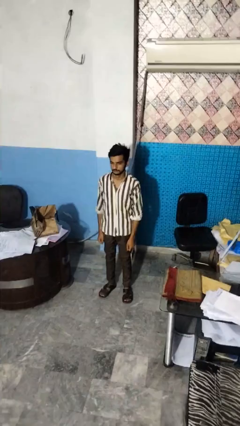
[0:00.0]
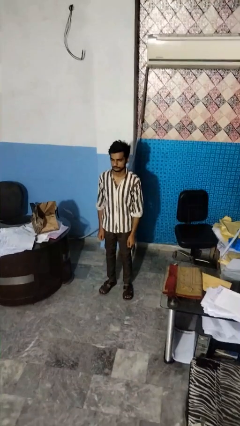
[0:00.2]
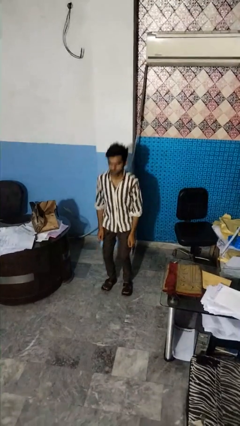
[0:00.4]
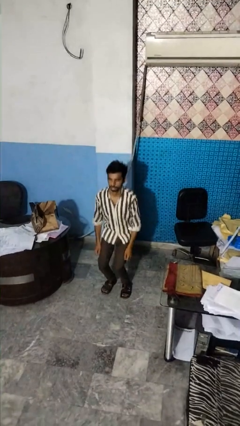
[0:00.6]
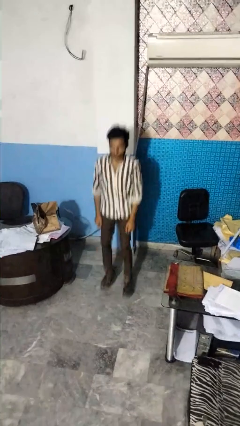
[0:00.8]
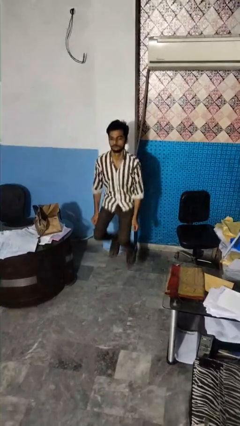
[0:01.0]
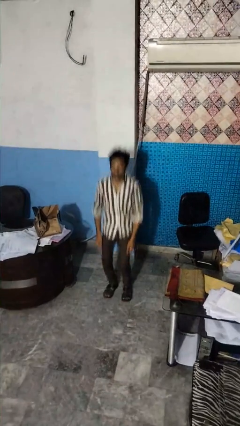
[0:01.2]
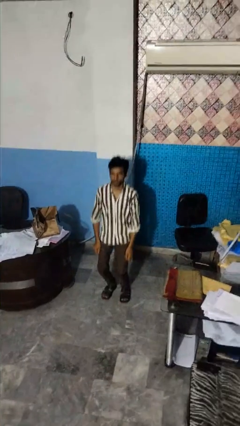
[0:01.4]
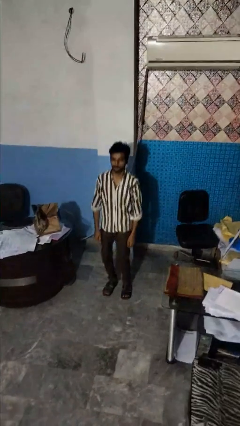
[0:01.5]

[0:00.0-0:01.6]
person jumps

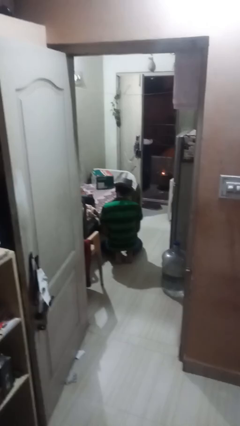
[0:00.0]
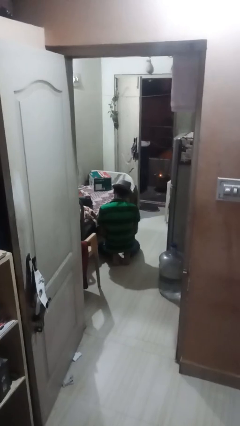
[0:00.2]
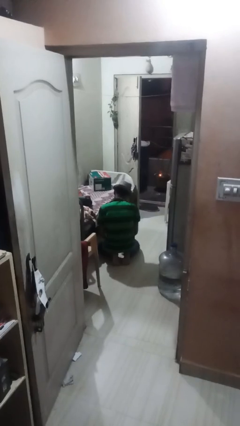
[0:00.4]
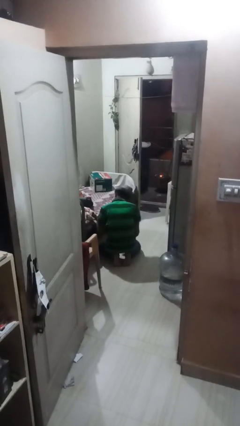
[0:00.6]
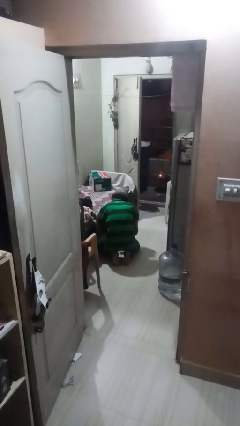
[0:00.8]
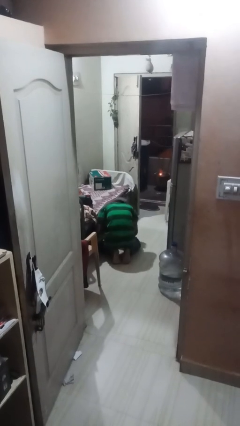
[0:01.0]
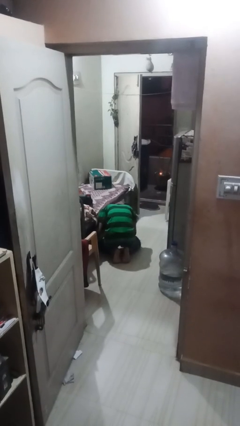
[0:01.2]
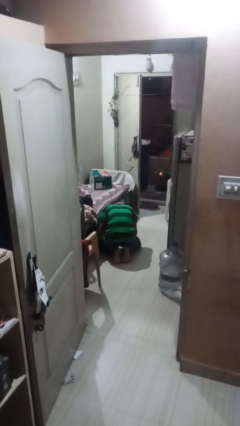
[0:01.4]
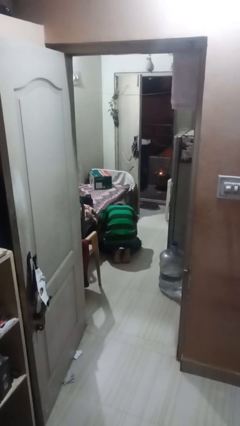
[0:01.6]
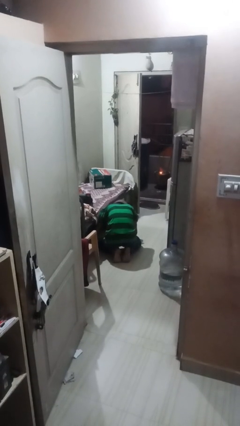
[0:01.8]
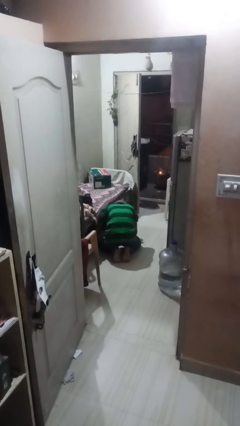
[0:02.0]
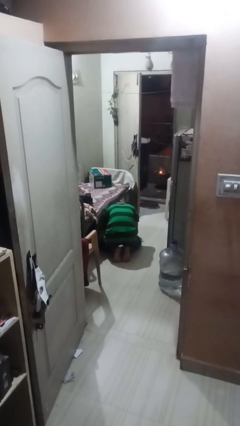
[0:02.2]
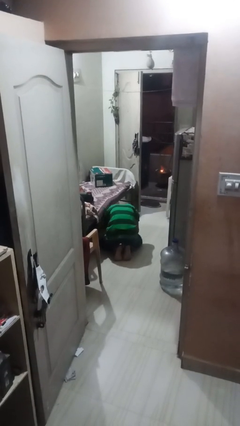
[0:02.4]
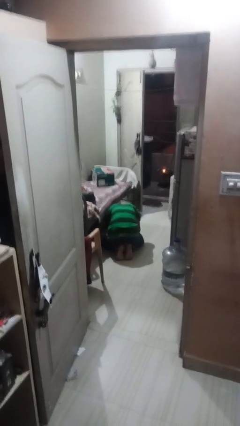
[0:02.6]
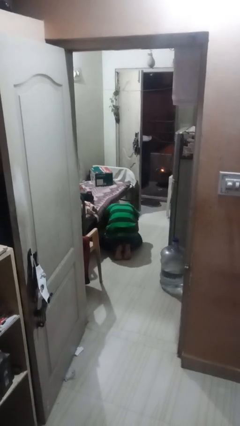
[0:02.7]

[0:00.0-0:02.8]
person searches under bed

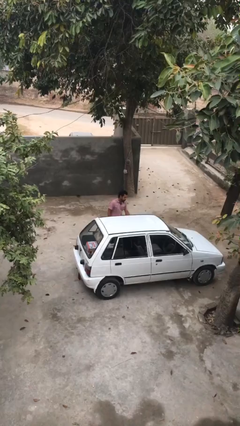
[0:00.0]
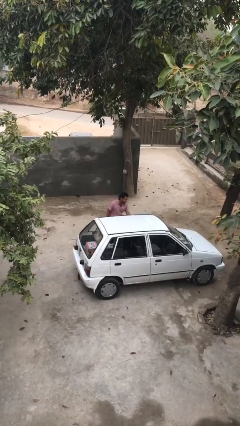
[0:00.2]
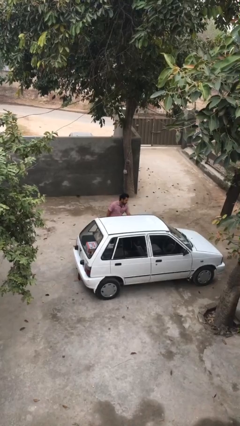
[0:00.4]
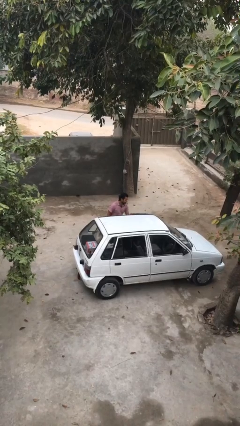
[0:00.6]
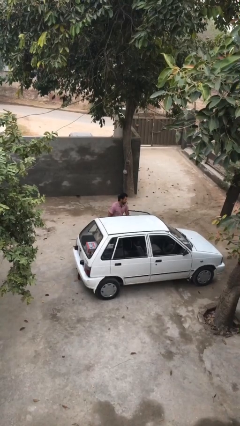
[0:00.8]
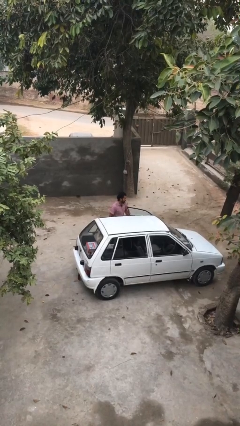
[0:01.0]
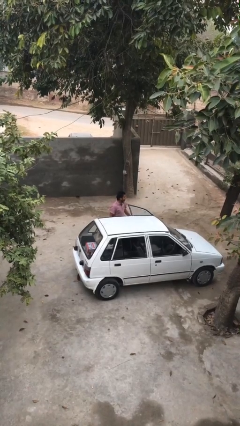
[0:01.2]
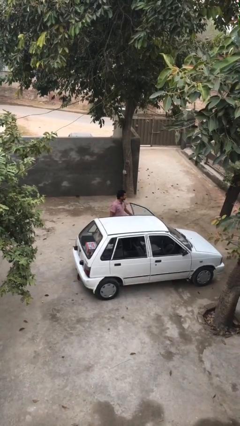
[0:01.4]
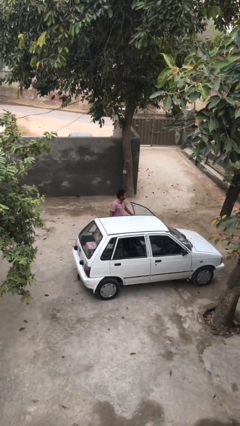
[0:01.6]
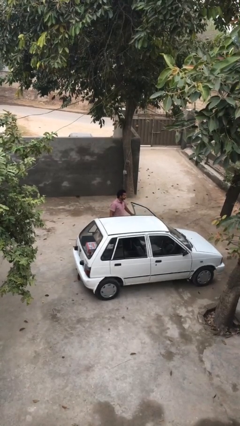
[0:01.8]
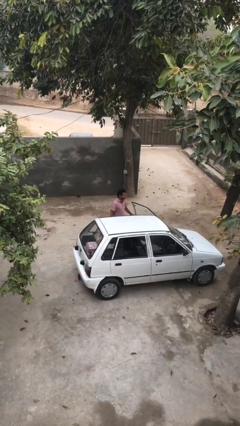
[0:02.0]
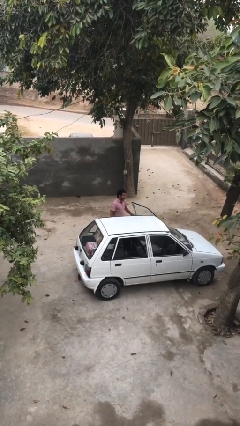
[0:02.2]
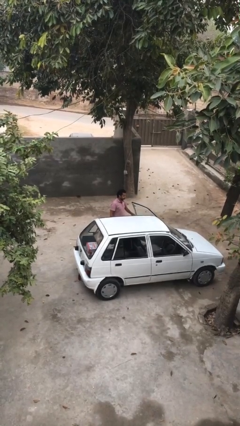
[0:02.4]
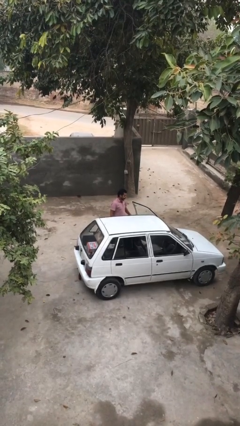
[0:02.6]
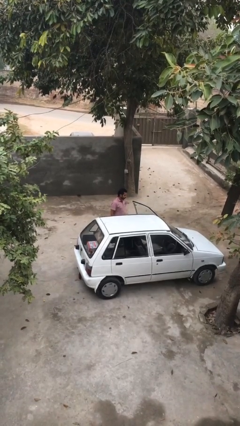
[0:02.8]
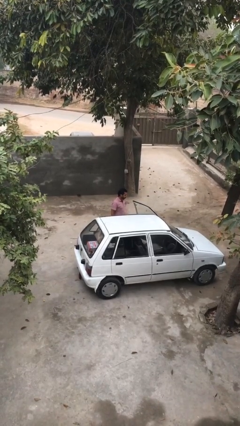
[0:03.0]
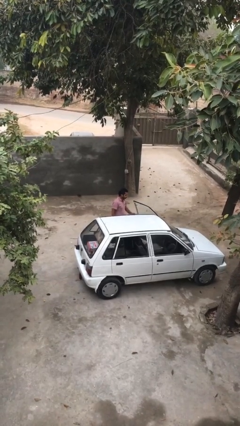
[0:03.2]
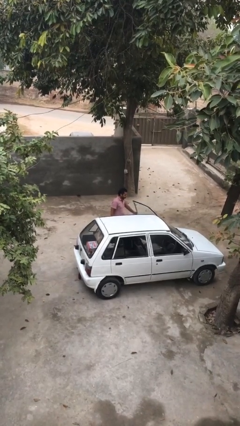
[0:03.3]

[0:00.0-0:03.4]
person opens car door

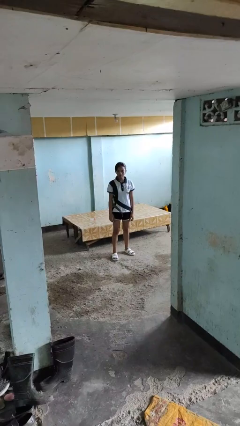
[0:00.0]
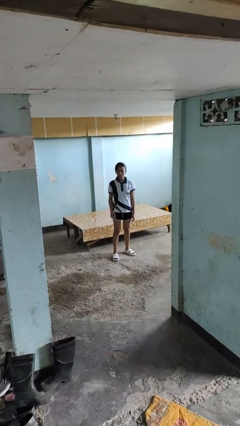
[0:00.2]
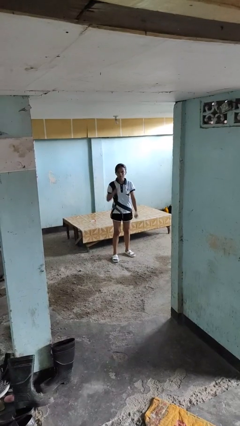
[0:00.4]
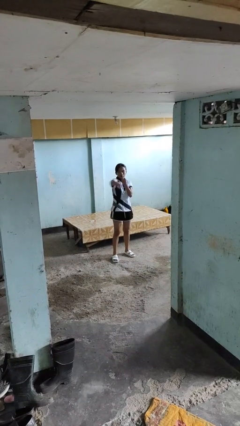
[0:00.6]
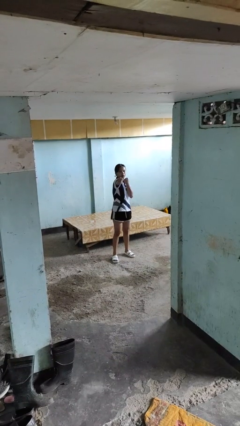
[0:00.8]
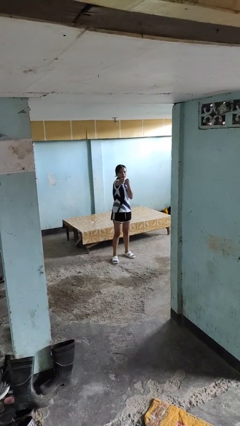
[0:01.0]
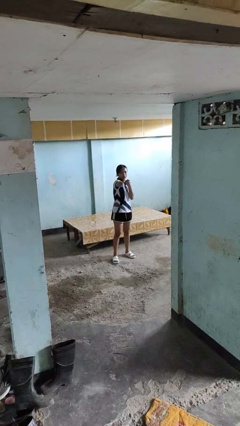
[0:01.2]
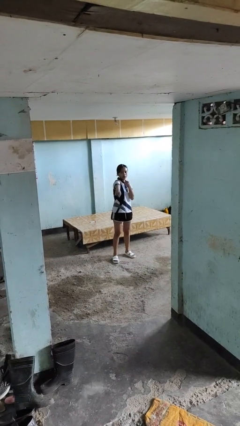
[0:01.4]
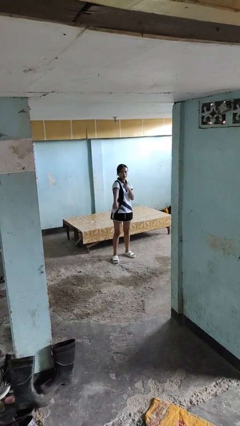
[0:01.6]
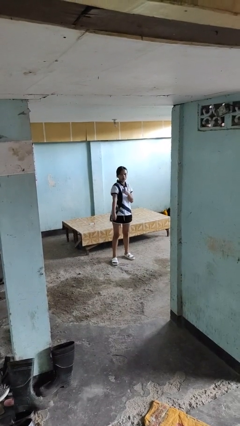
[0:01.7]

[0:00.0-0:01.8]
person punches

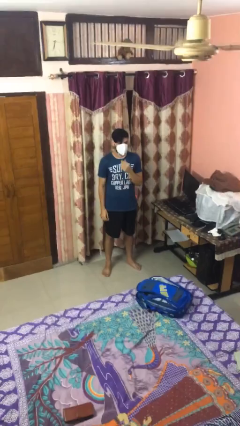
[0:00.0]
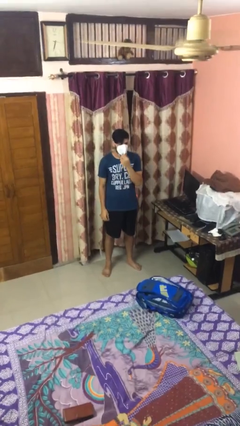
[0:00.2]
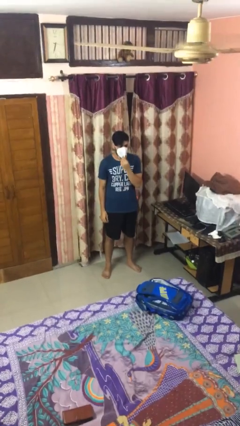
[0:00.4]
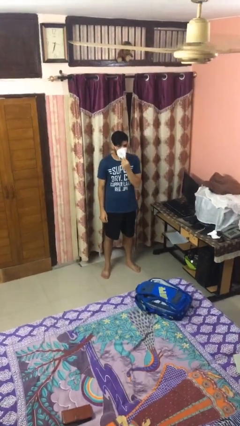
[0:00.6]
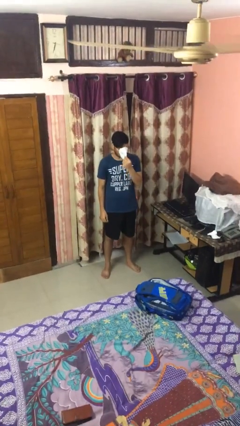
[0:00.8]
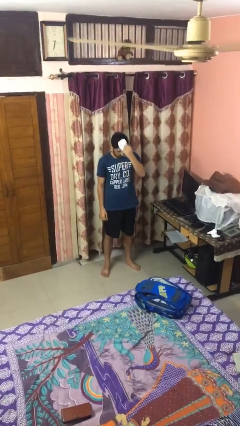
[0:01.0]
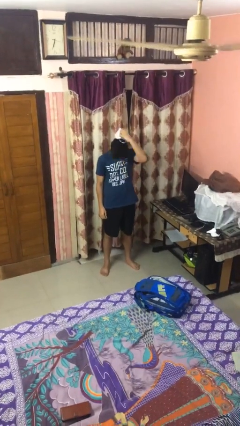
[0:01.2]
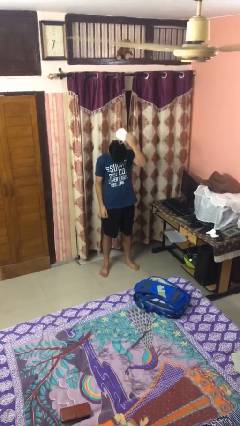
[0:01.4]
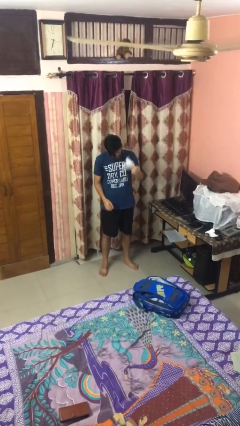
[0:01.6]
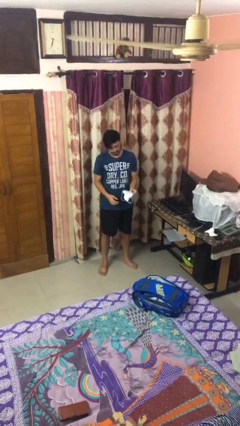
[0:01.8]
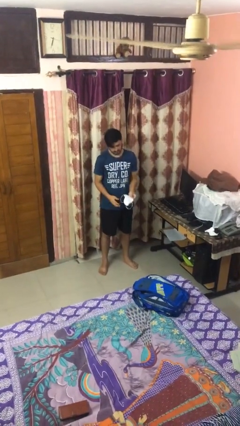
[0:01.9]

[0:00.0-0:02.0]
person takes off facemask

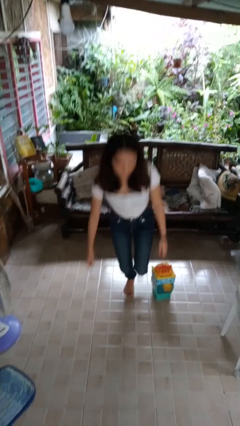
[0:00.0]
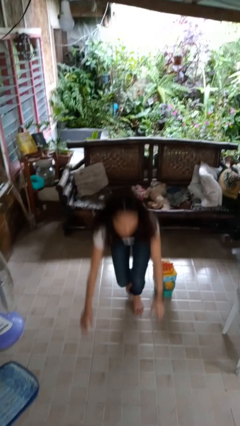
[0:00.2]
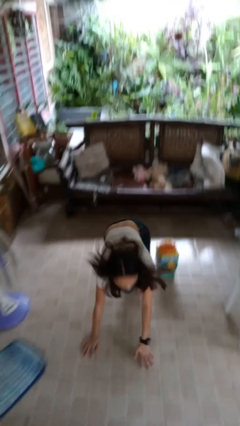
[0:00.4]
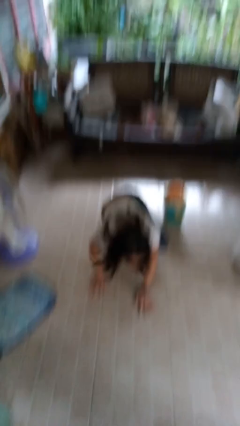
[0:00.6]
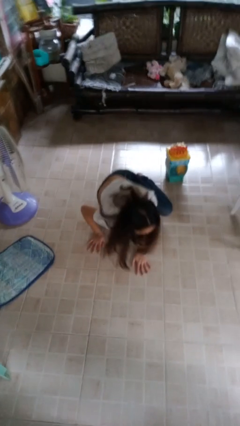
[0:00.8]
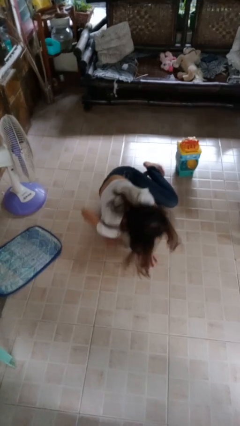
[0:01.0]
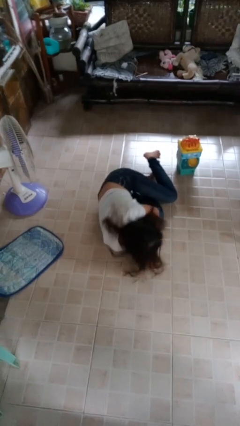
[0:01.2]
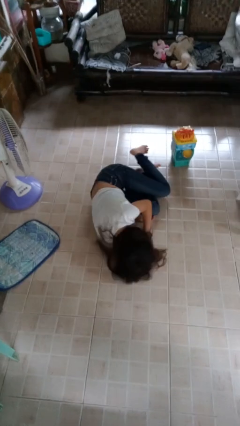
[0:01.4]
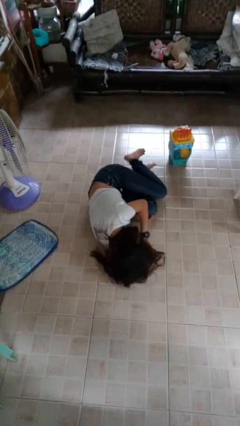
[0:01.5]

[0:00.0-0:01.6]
person lies down on floor

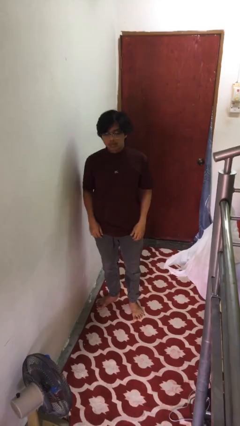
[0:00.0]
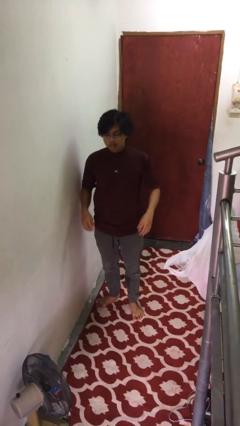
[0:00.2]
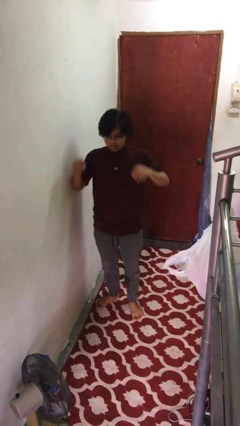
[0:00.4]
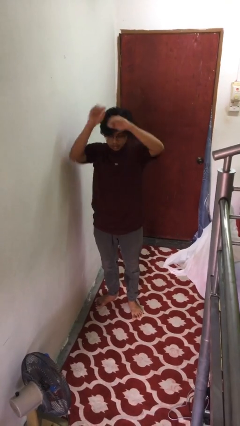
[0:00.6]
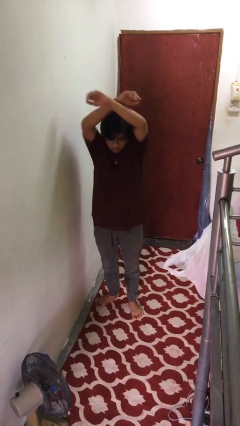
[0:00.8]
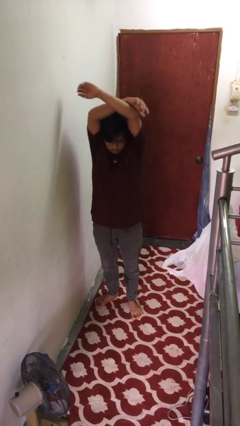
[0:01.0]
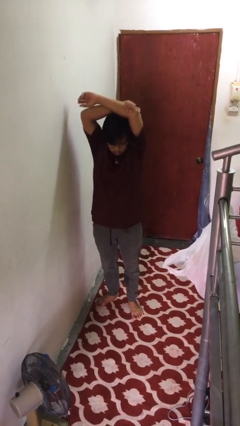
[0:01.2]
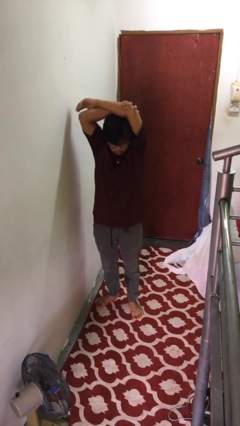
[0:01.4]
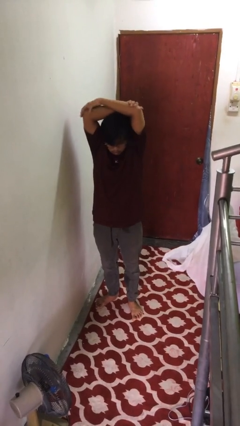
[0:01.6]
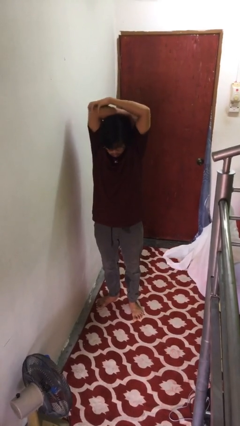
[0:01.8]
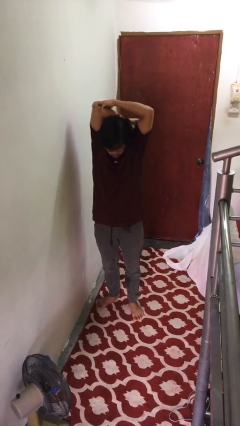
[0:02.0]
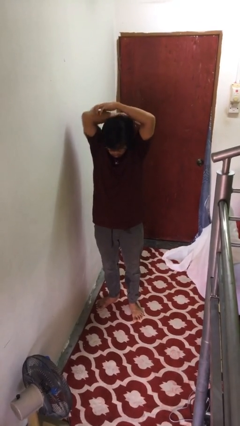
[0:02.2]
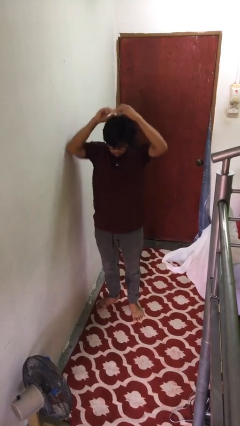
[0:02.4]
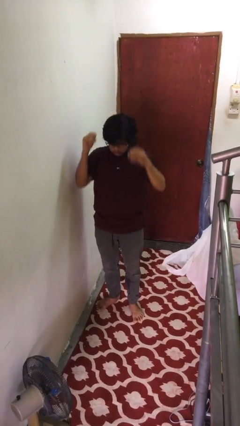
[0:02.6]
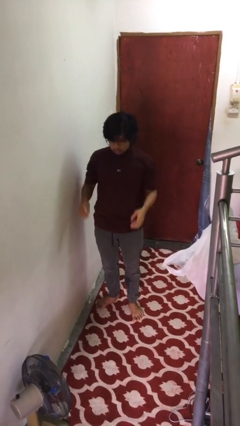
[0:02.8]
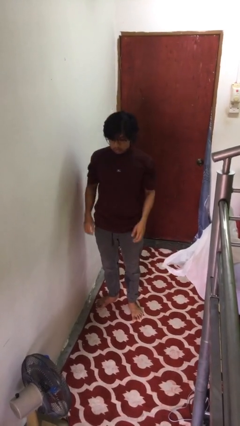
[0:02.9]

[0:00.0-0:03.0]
person stretches arms over head

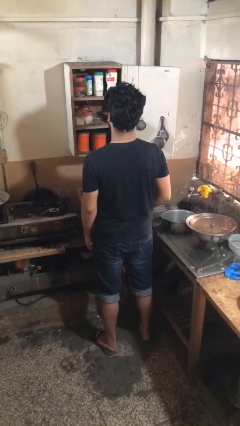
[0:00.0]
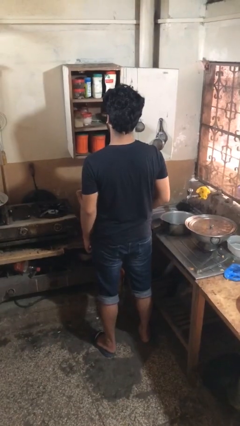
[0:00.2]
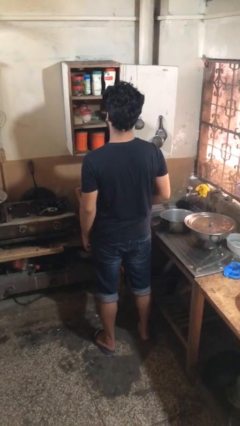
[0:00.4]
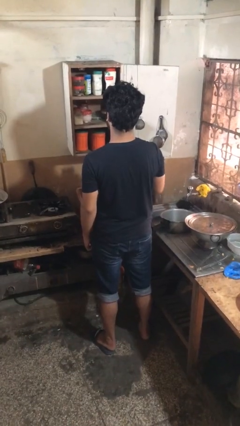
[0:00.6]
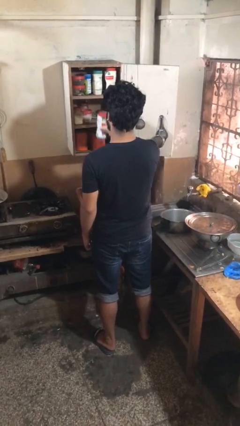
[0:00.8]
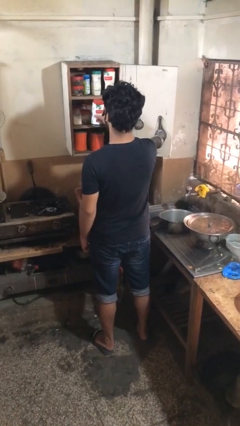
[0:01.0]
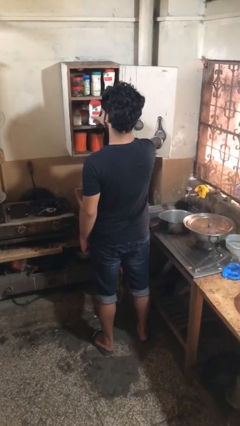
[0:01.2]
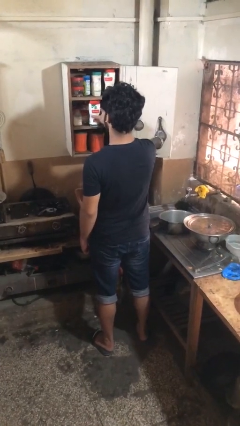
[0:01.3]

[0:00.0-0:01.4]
person puts down object into cabinet
